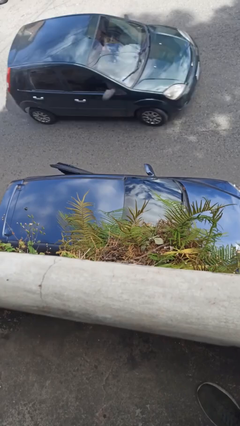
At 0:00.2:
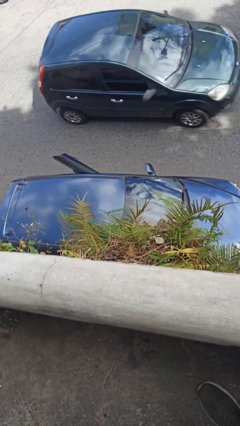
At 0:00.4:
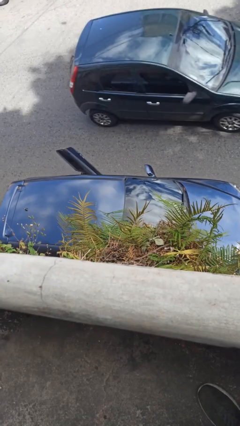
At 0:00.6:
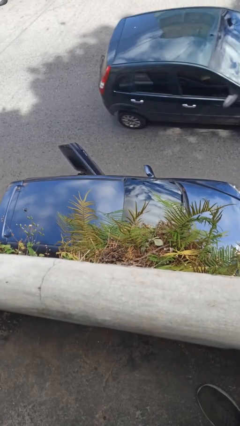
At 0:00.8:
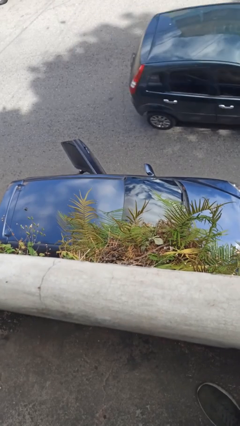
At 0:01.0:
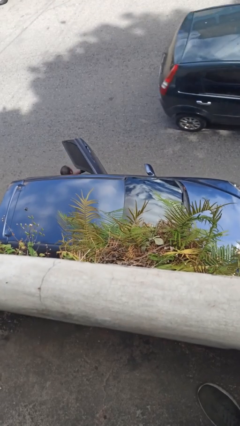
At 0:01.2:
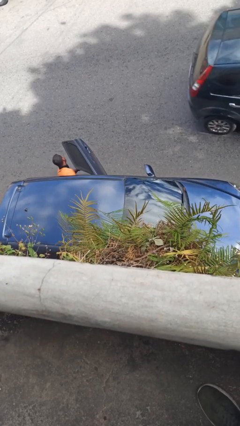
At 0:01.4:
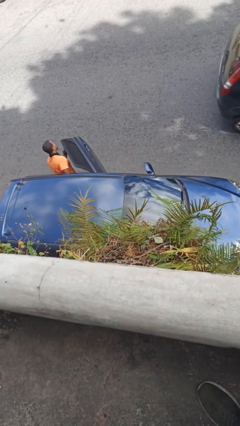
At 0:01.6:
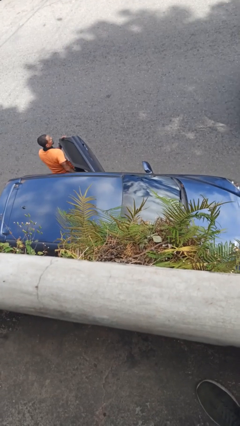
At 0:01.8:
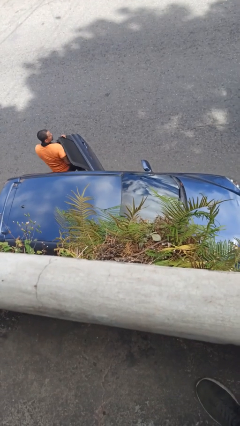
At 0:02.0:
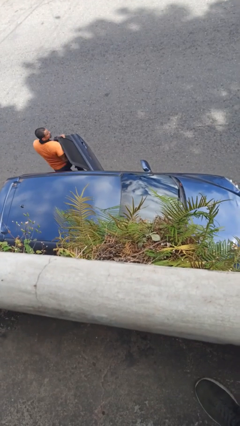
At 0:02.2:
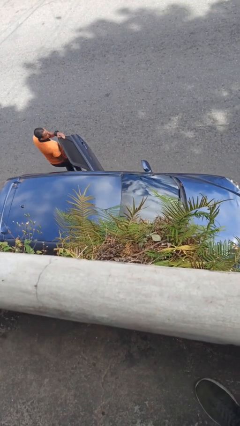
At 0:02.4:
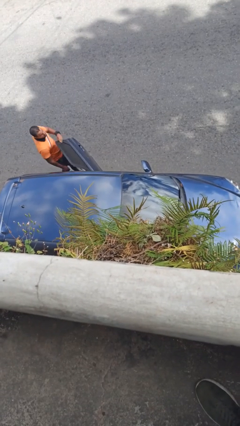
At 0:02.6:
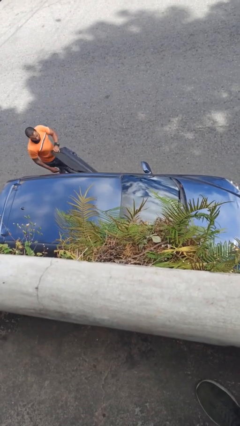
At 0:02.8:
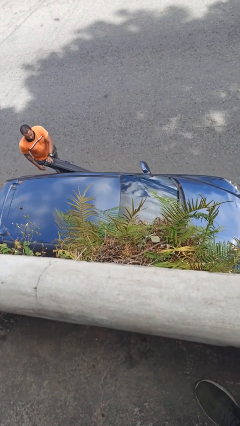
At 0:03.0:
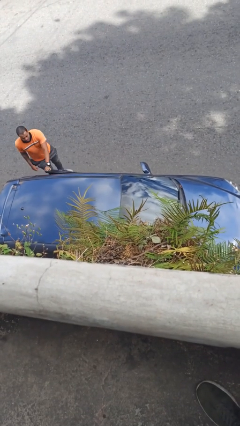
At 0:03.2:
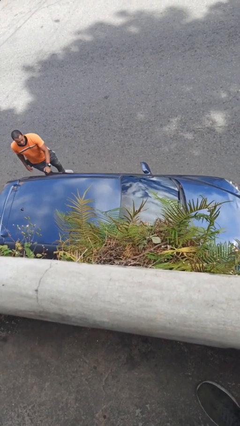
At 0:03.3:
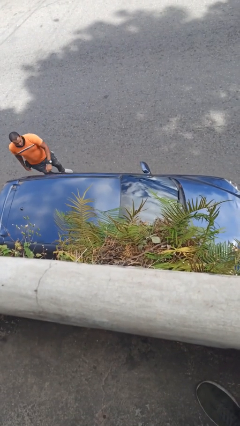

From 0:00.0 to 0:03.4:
car drops off person

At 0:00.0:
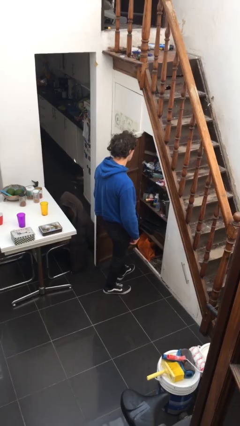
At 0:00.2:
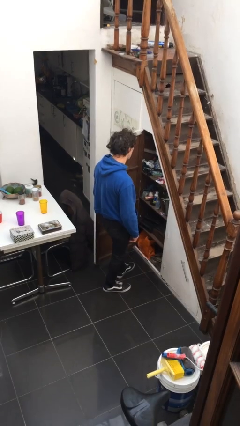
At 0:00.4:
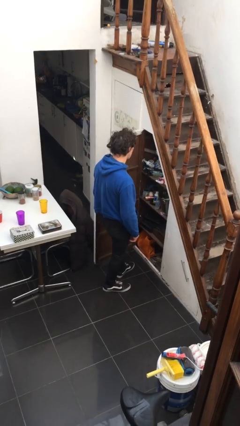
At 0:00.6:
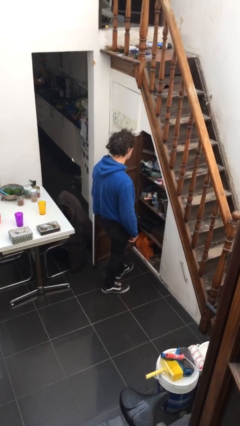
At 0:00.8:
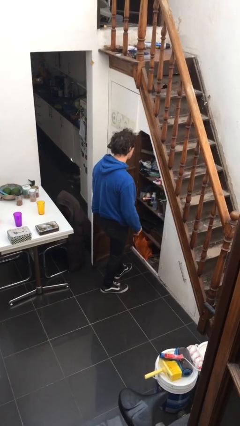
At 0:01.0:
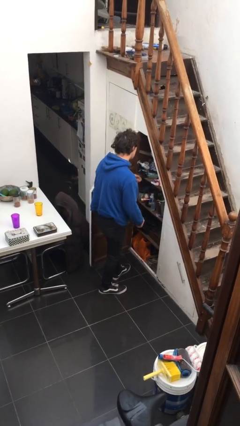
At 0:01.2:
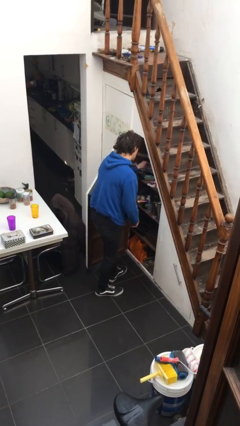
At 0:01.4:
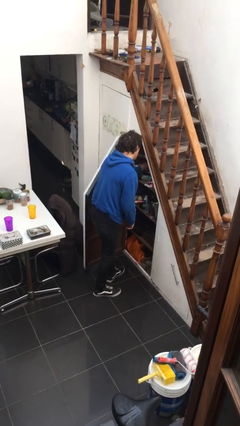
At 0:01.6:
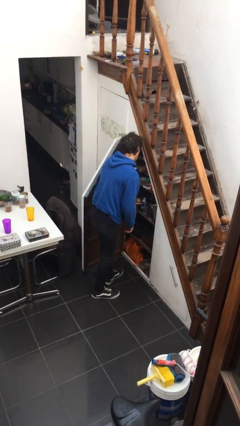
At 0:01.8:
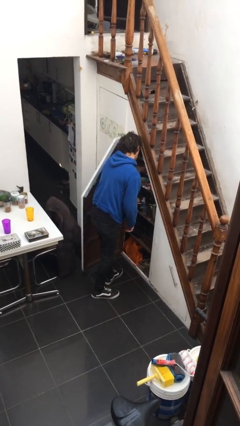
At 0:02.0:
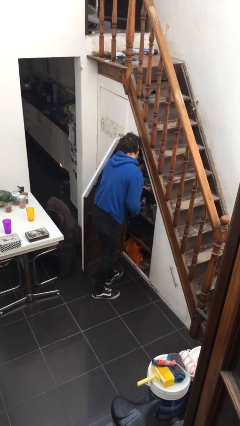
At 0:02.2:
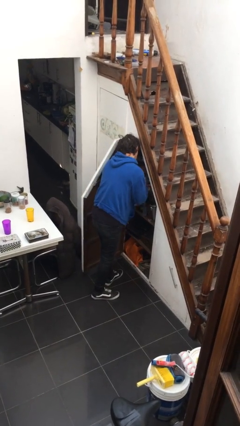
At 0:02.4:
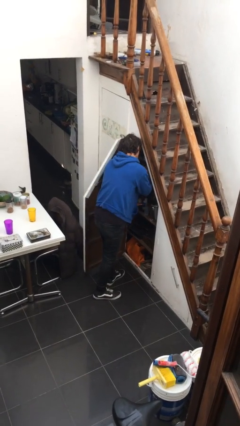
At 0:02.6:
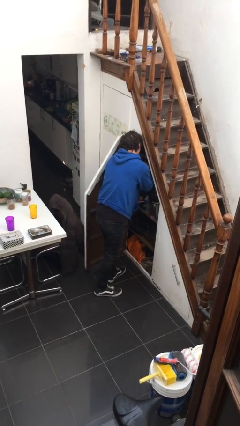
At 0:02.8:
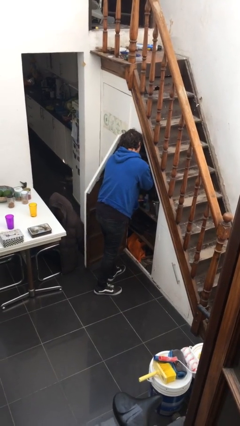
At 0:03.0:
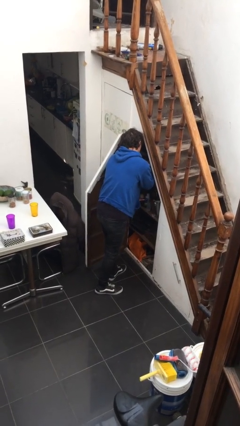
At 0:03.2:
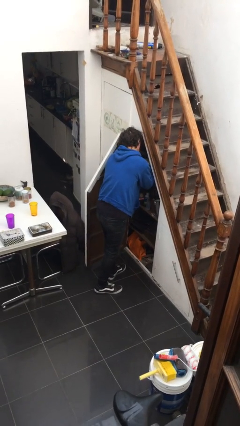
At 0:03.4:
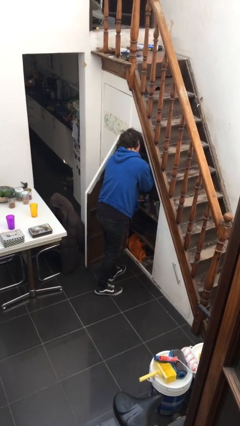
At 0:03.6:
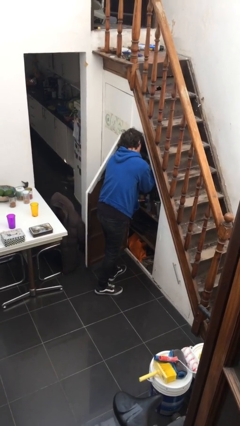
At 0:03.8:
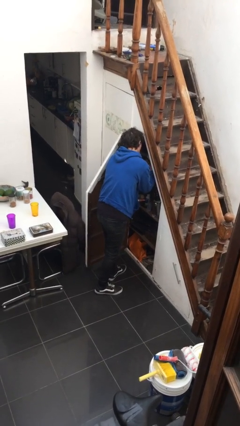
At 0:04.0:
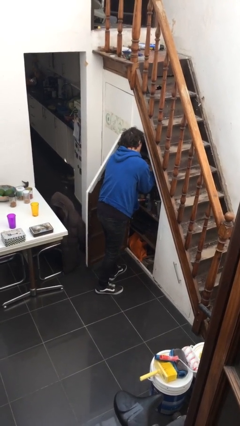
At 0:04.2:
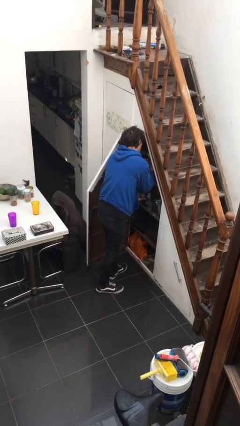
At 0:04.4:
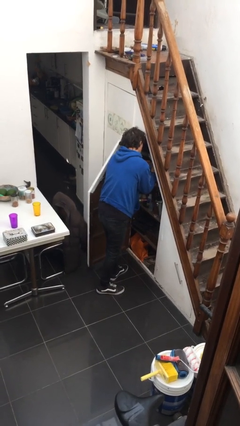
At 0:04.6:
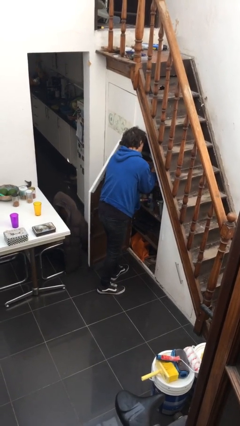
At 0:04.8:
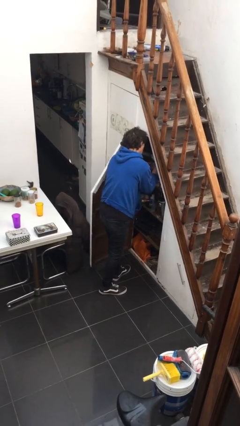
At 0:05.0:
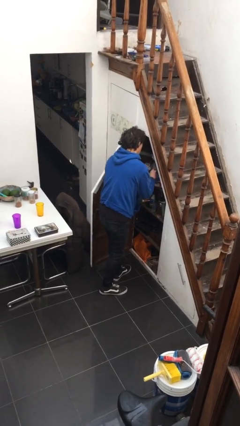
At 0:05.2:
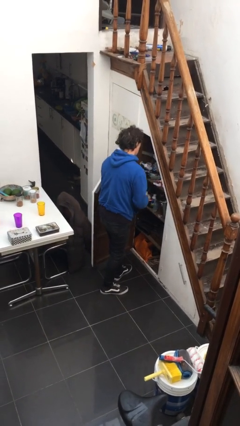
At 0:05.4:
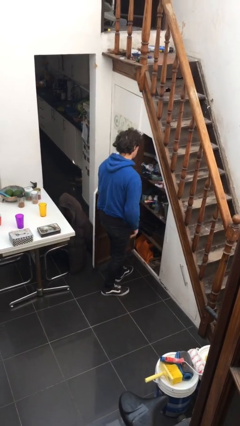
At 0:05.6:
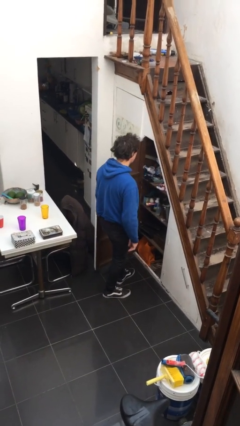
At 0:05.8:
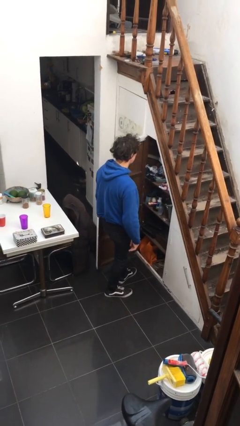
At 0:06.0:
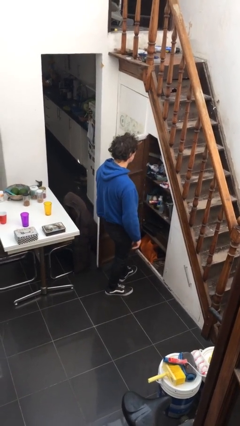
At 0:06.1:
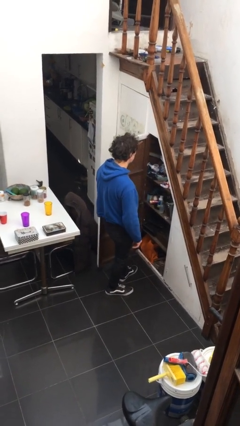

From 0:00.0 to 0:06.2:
person searches in cabinet

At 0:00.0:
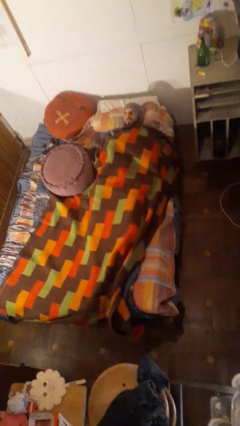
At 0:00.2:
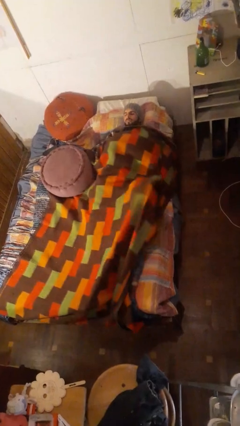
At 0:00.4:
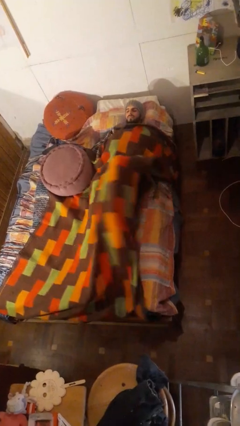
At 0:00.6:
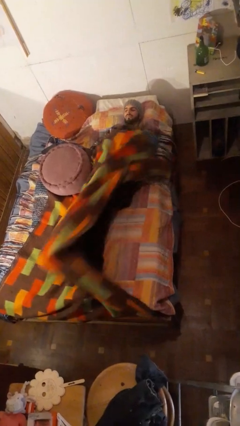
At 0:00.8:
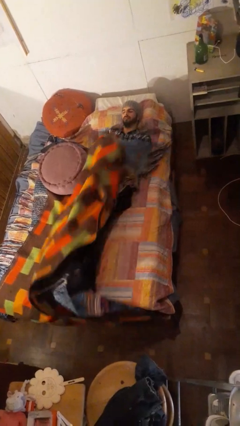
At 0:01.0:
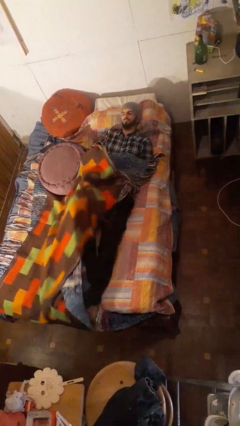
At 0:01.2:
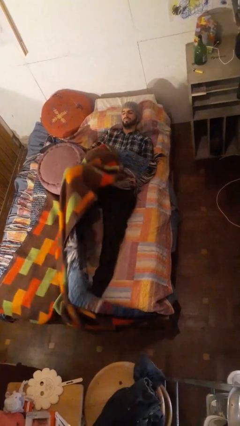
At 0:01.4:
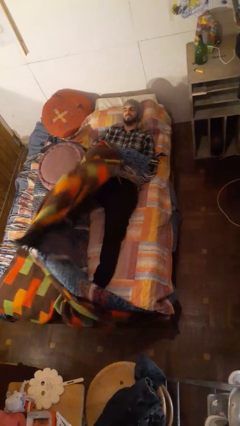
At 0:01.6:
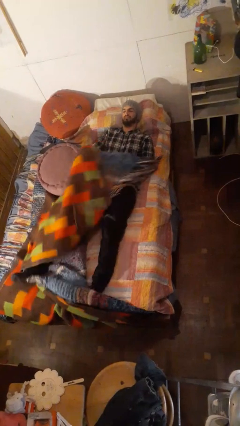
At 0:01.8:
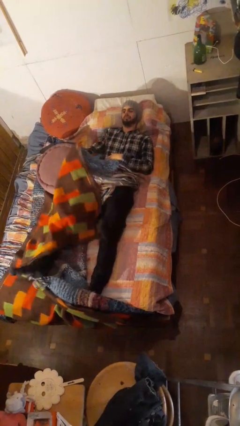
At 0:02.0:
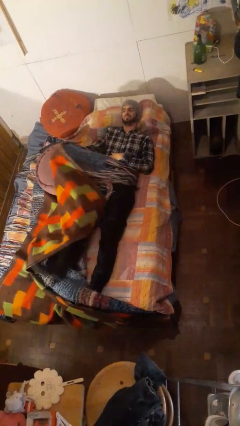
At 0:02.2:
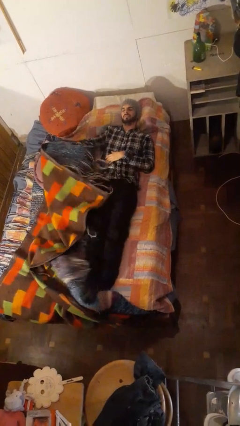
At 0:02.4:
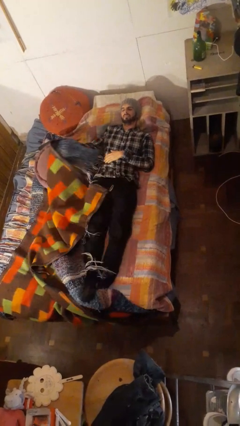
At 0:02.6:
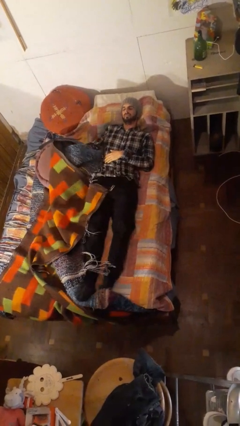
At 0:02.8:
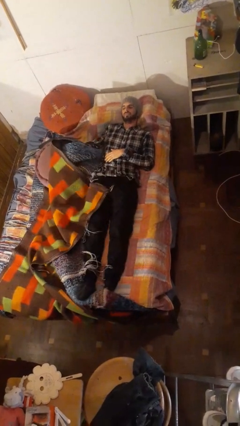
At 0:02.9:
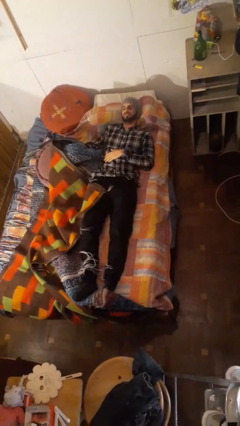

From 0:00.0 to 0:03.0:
person uncovers with bedsheets

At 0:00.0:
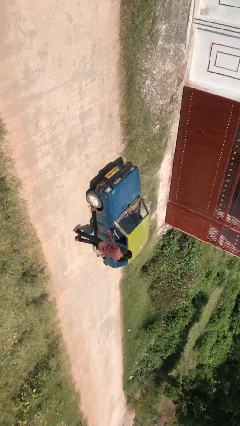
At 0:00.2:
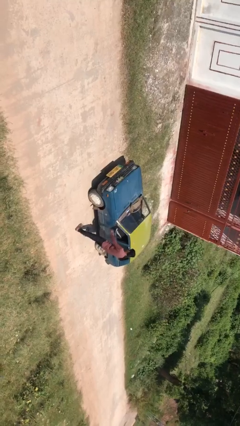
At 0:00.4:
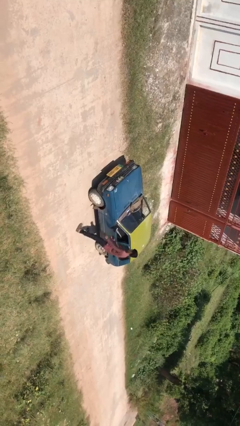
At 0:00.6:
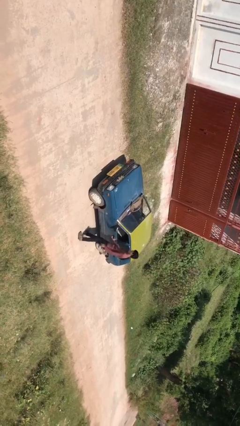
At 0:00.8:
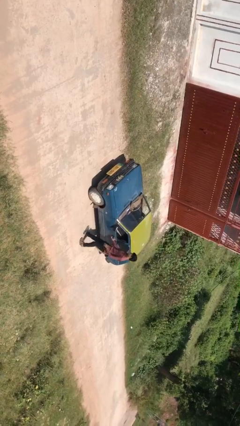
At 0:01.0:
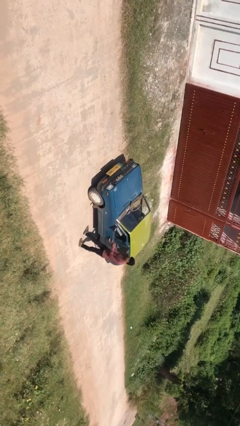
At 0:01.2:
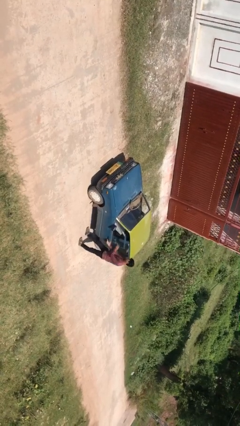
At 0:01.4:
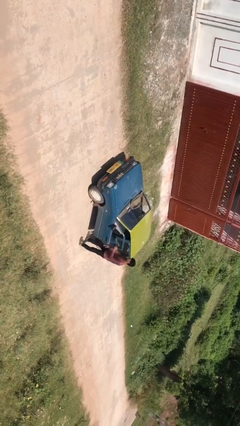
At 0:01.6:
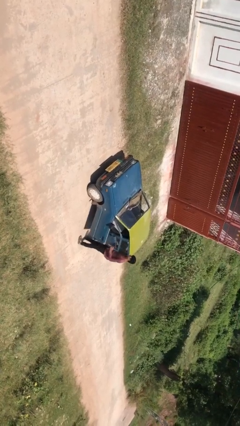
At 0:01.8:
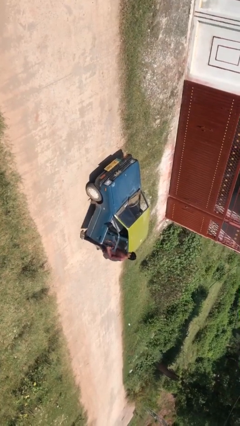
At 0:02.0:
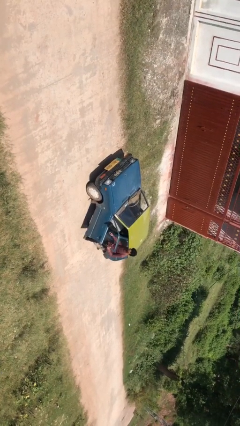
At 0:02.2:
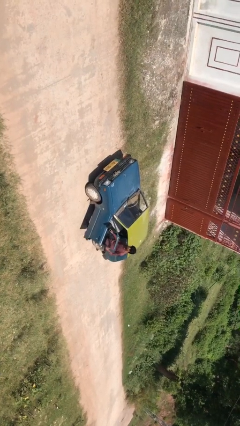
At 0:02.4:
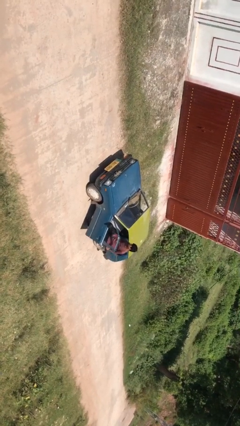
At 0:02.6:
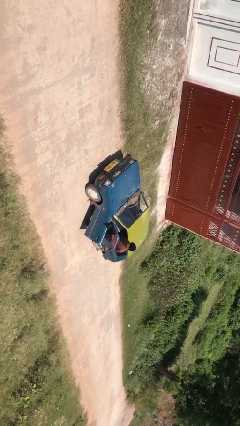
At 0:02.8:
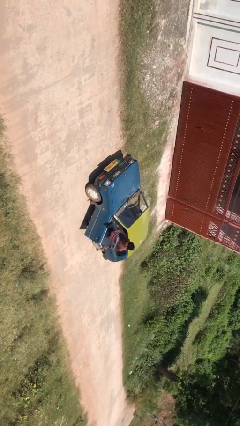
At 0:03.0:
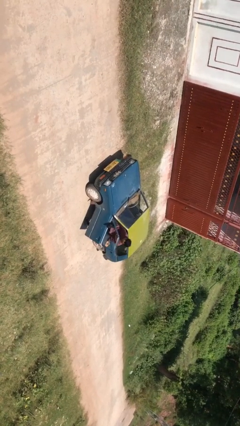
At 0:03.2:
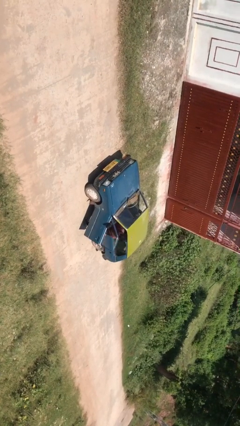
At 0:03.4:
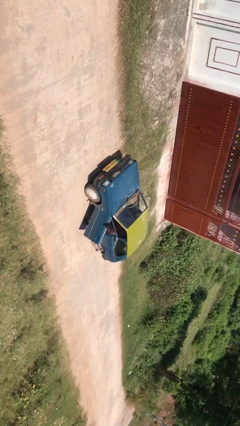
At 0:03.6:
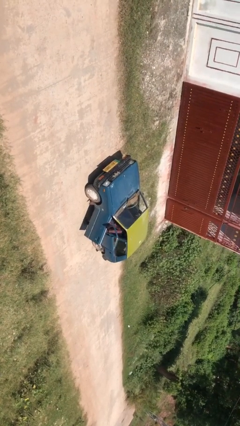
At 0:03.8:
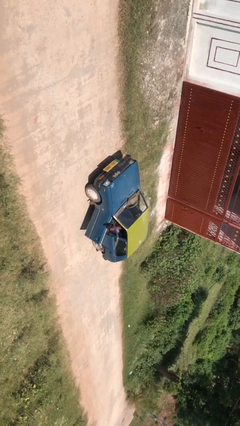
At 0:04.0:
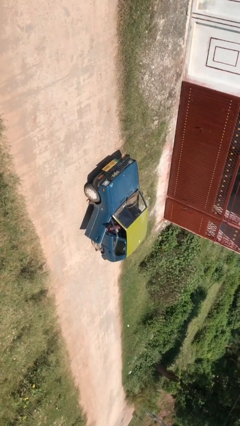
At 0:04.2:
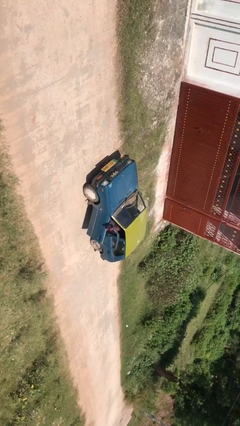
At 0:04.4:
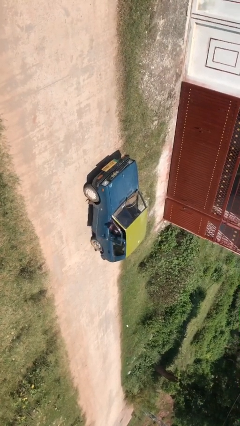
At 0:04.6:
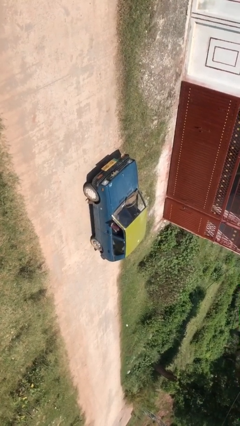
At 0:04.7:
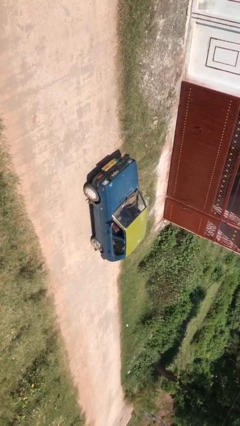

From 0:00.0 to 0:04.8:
car picks up person

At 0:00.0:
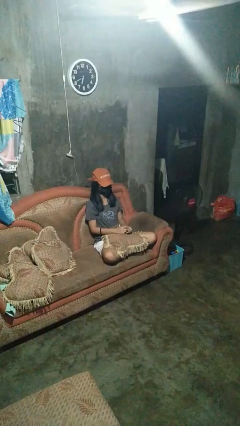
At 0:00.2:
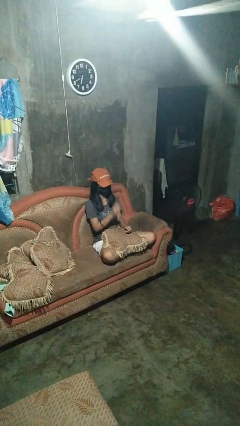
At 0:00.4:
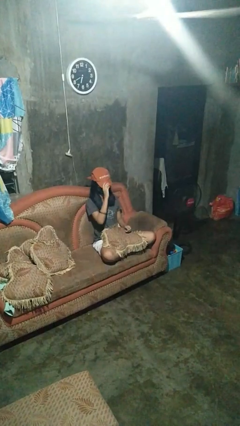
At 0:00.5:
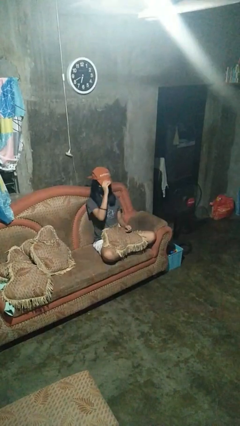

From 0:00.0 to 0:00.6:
person takes off hat
